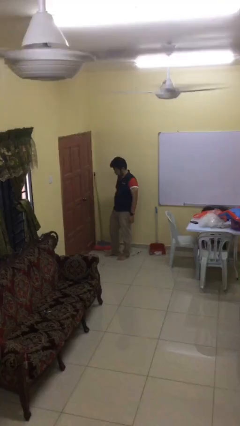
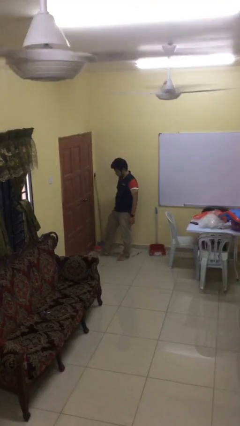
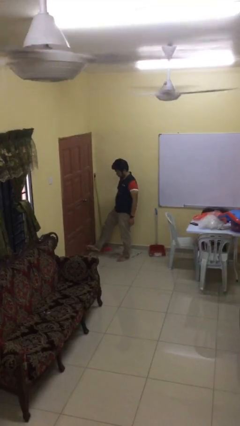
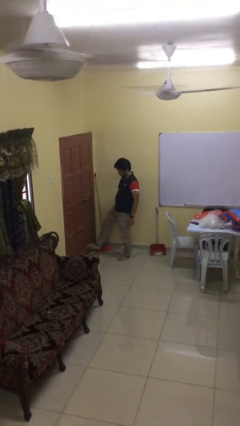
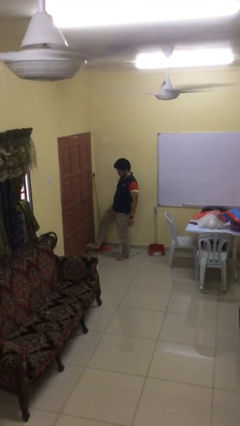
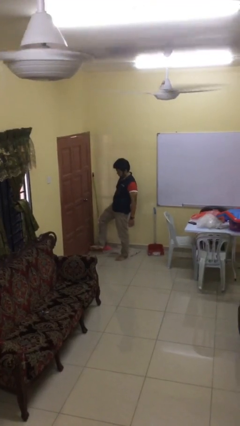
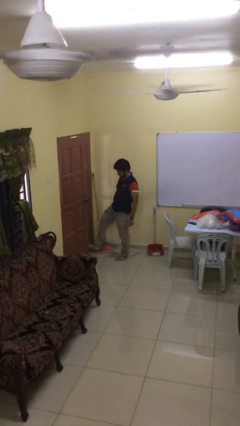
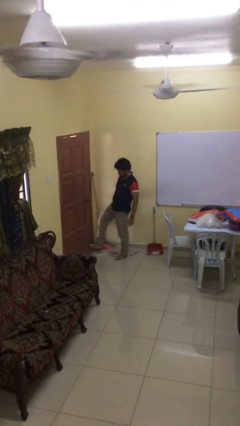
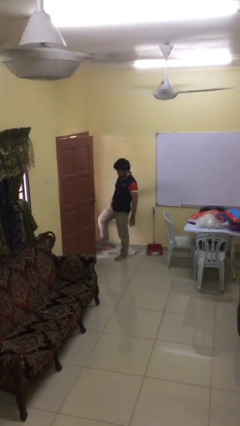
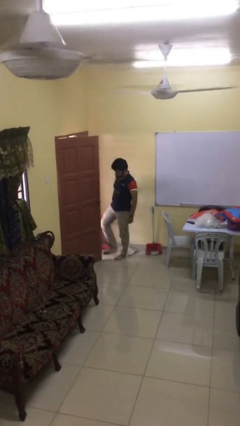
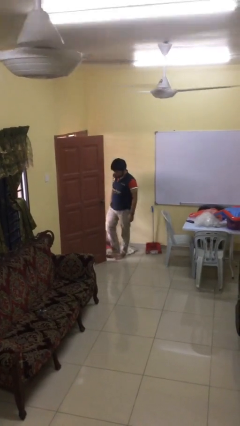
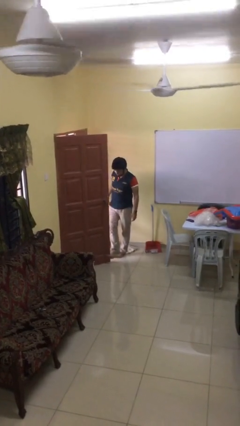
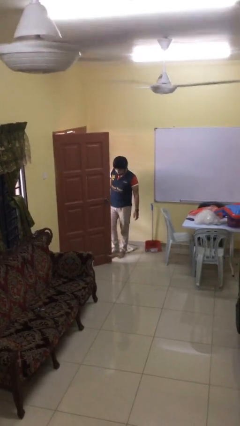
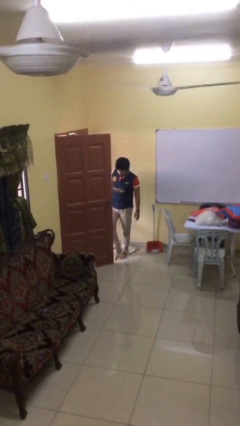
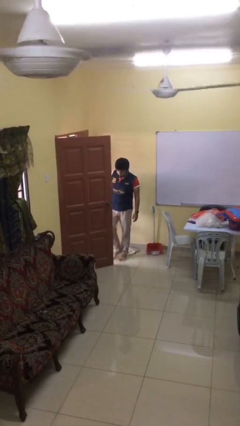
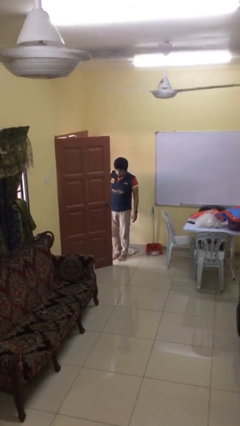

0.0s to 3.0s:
person opens facility door

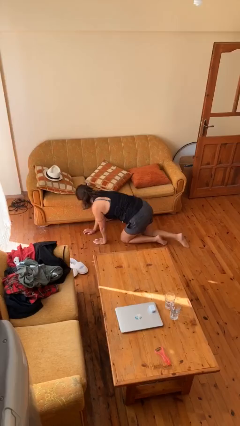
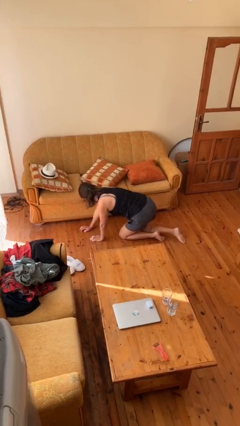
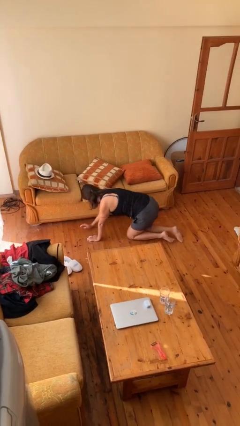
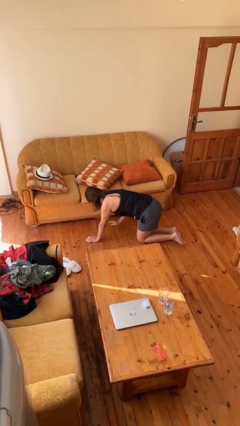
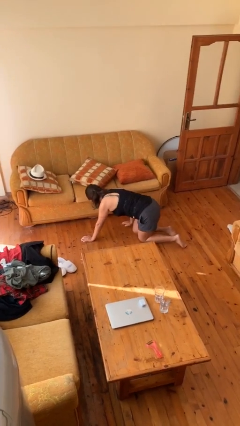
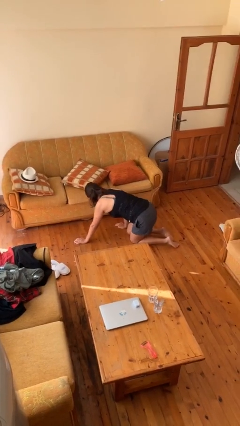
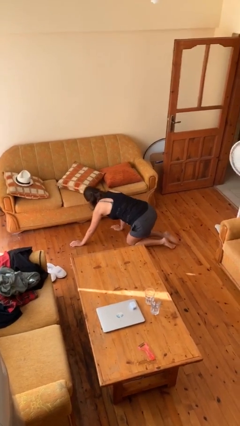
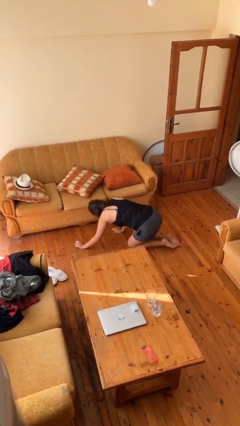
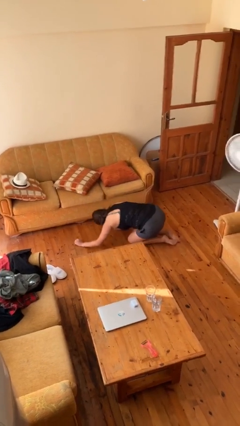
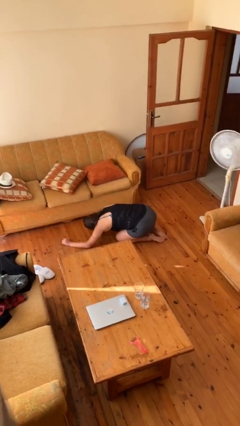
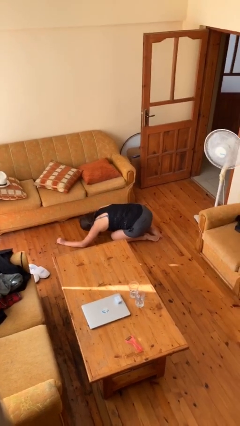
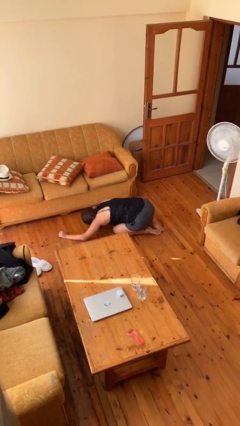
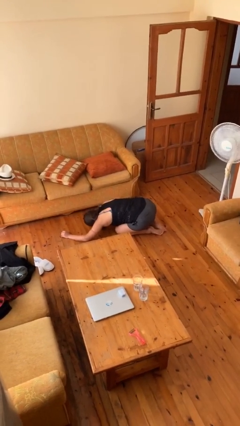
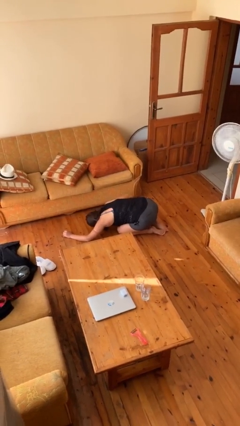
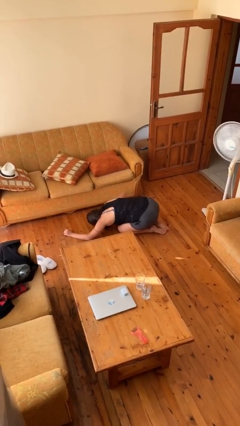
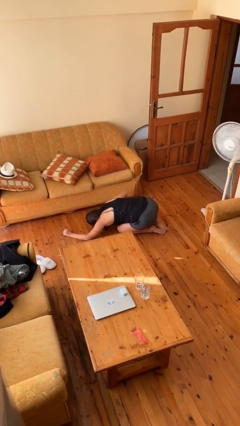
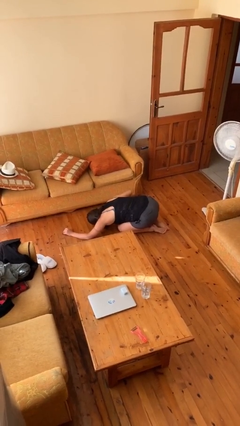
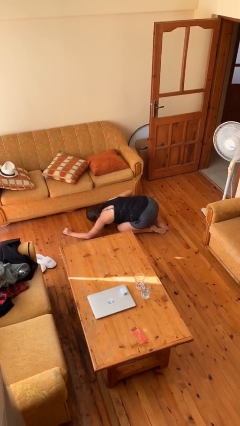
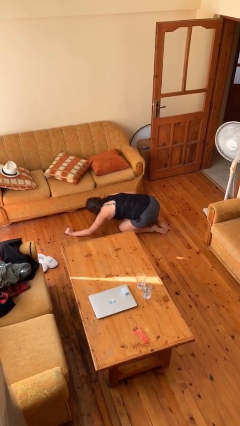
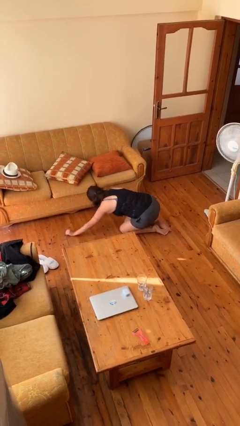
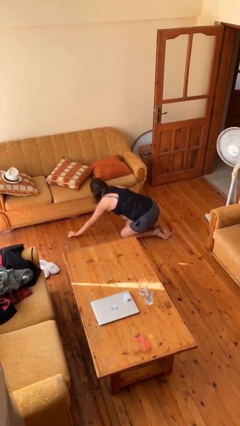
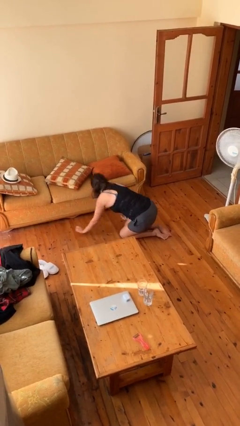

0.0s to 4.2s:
person searches under couch

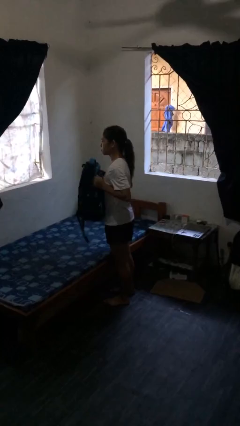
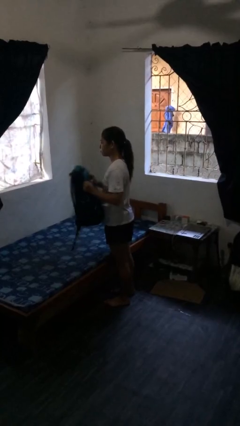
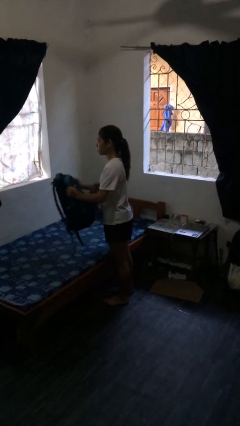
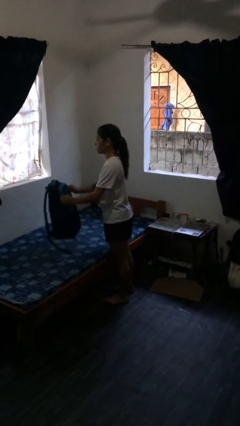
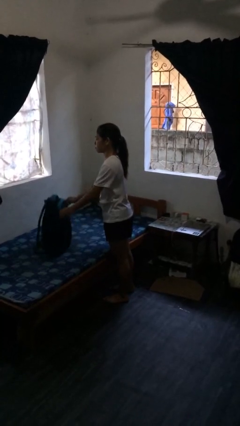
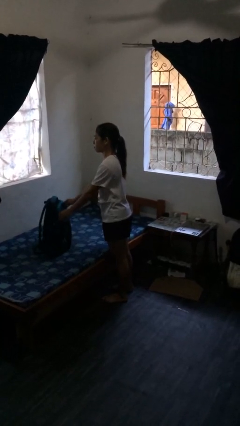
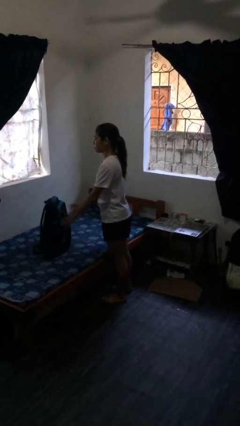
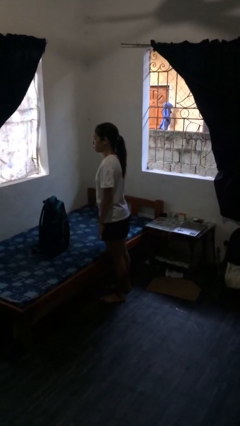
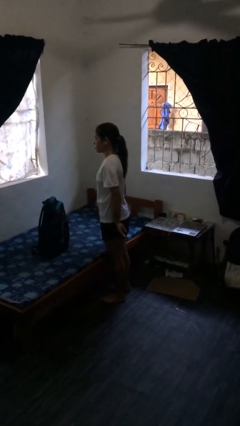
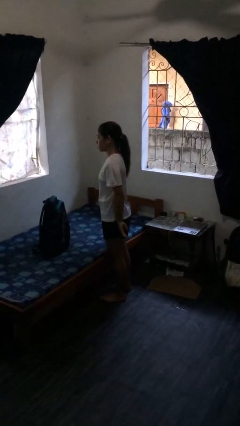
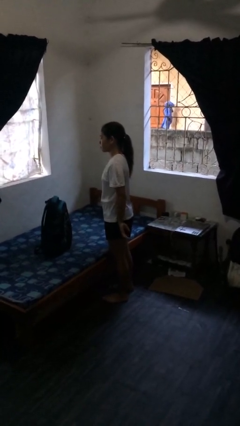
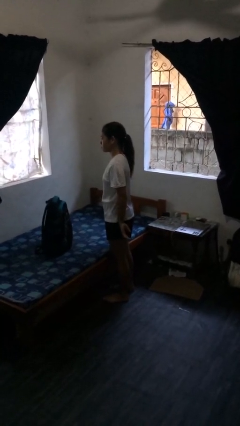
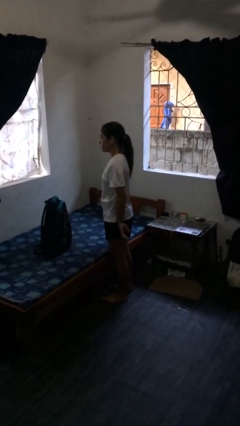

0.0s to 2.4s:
person puts down object on bed

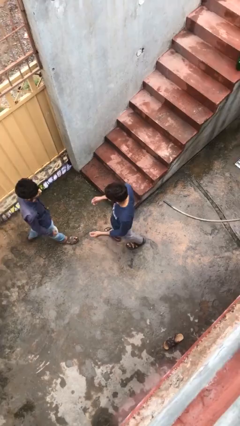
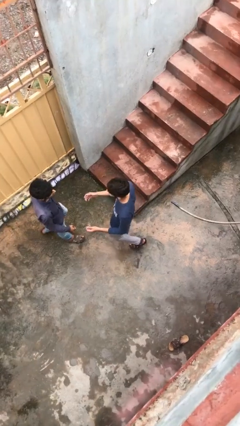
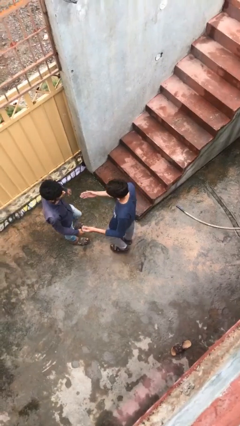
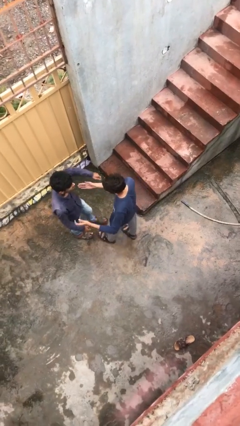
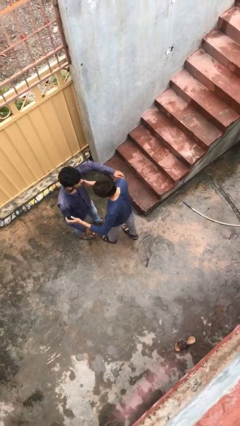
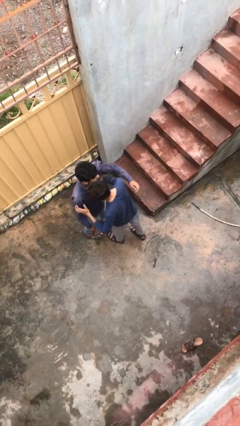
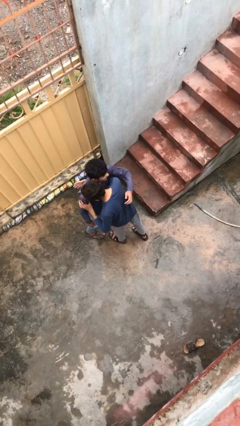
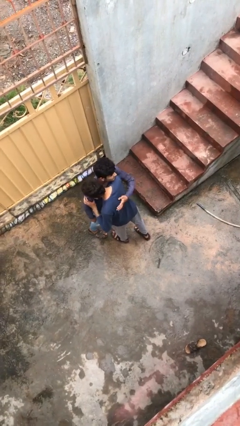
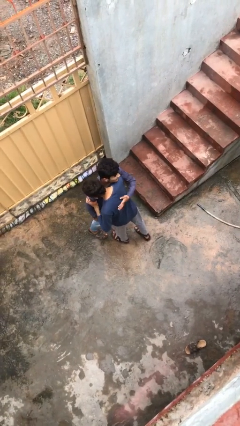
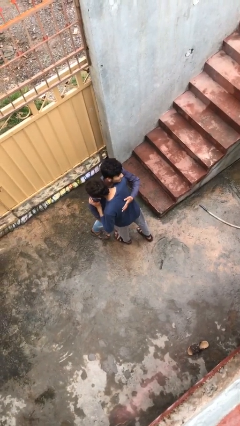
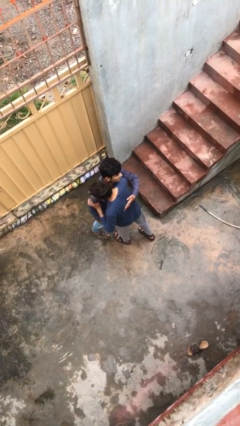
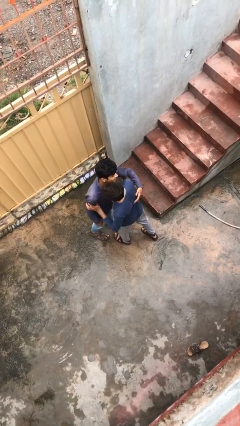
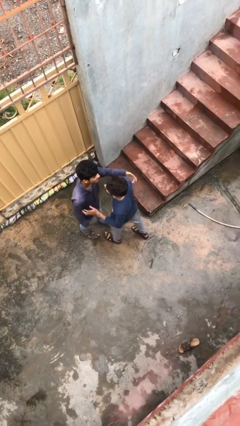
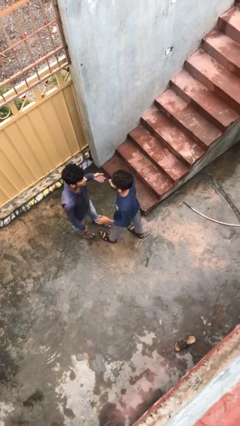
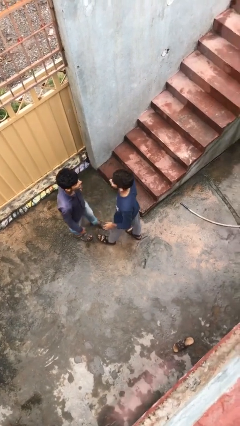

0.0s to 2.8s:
person embraces person

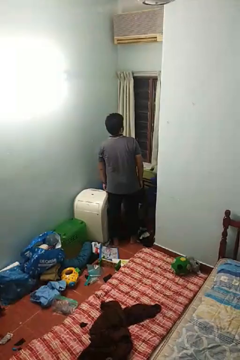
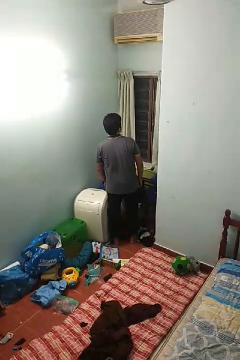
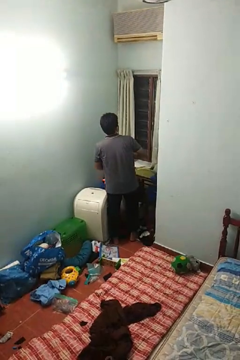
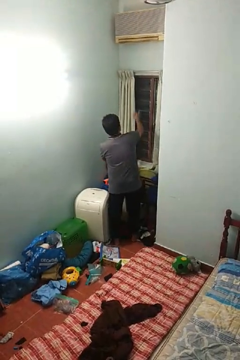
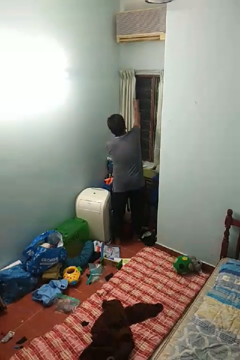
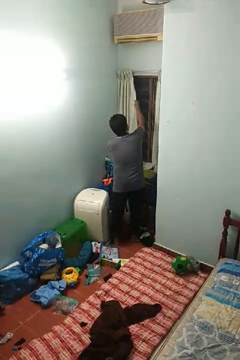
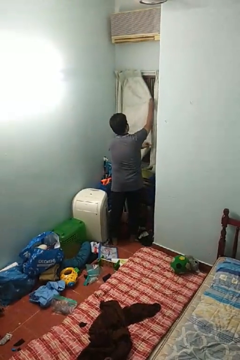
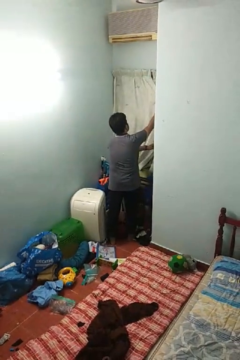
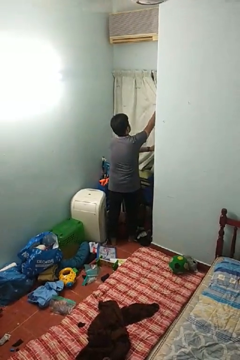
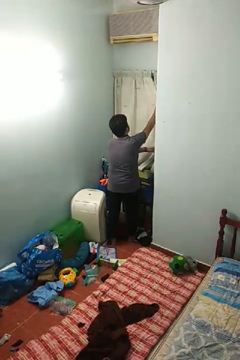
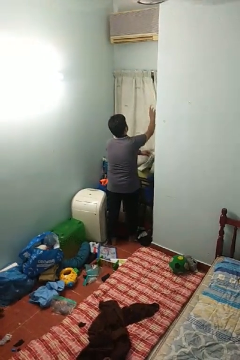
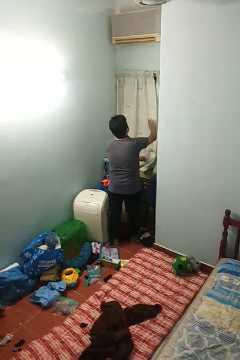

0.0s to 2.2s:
person closes curtains

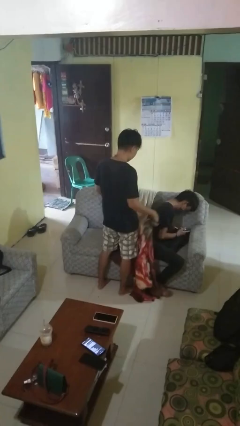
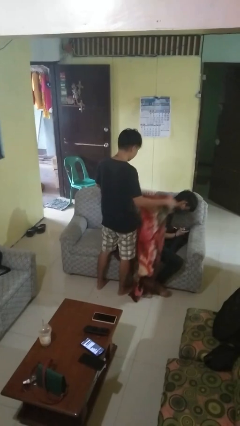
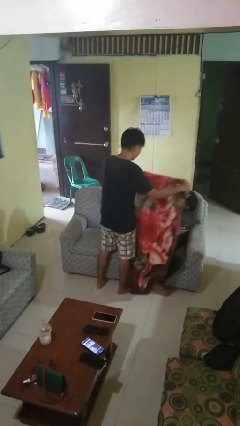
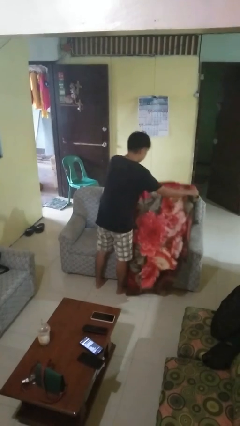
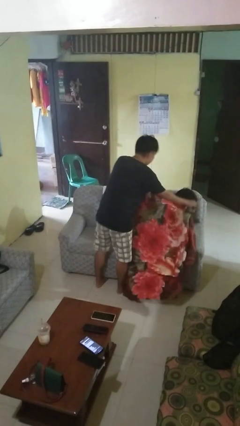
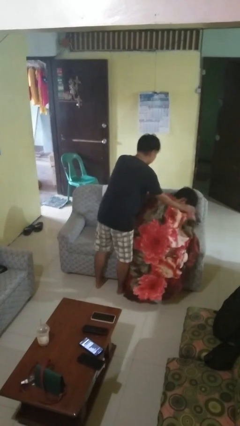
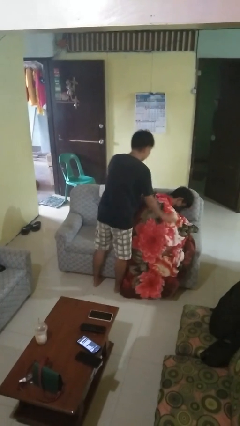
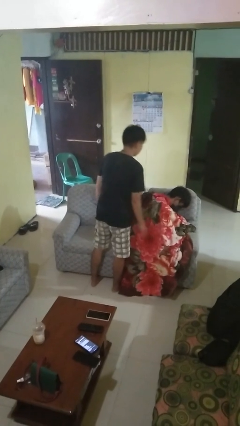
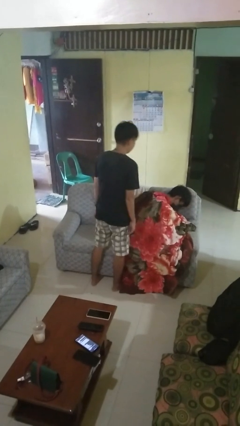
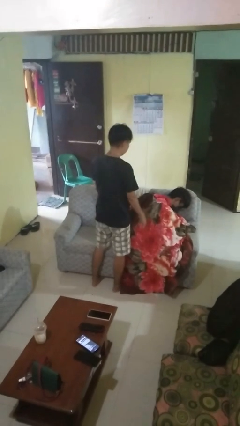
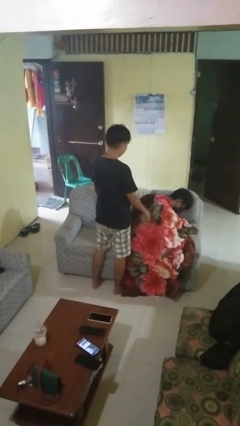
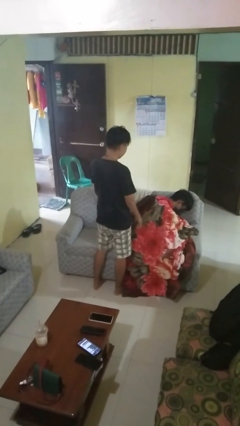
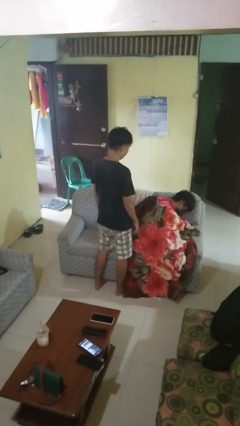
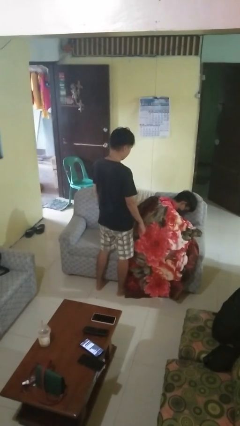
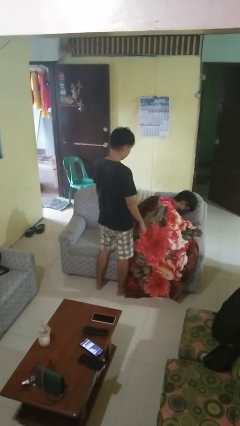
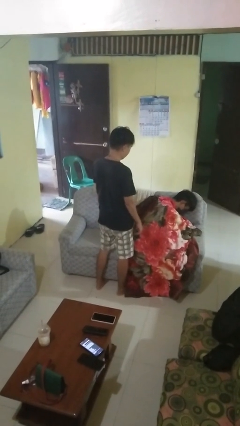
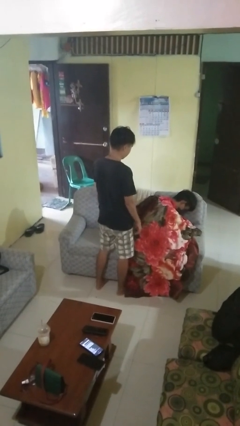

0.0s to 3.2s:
person covers friend with blanket
